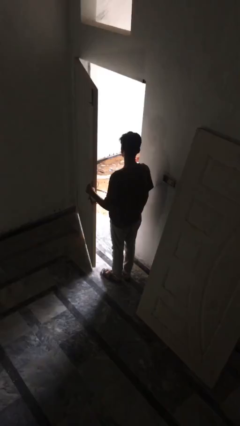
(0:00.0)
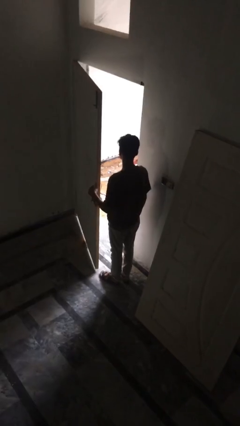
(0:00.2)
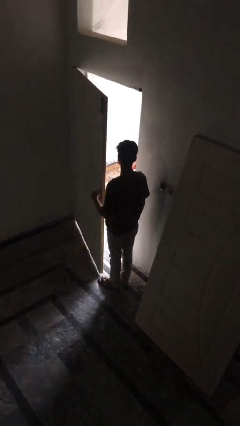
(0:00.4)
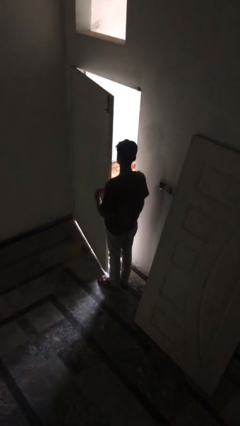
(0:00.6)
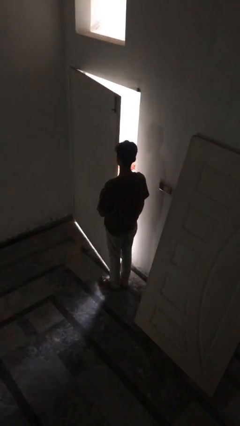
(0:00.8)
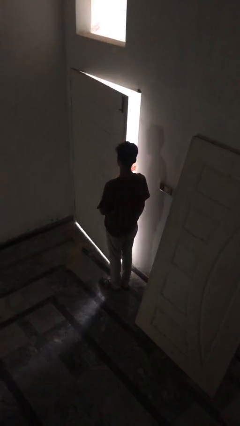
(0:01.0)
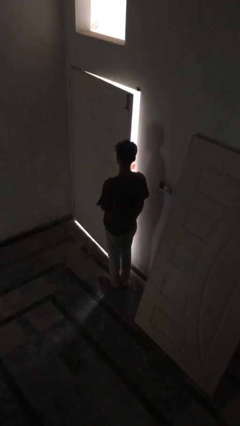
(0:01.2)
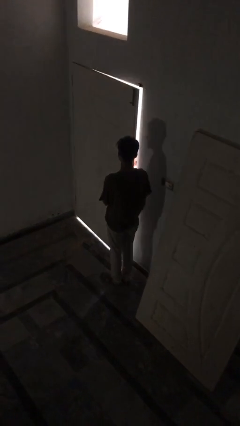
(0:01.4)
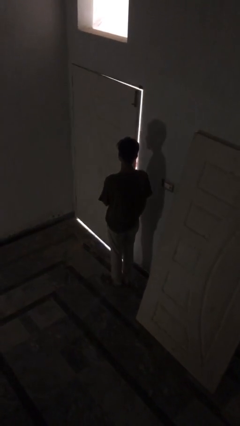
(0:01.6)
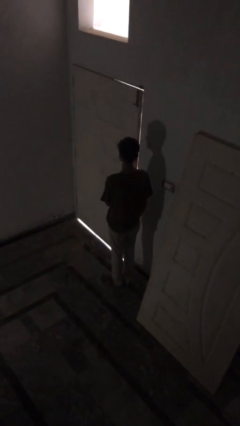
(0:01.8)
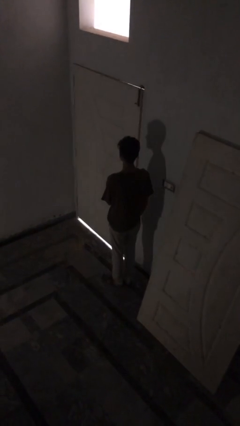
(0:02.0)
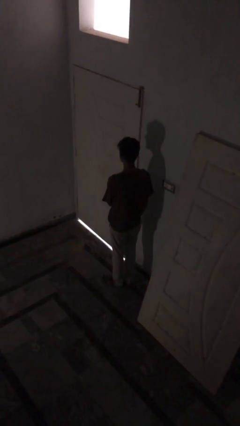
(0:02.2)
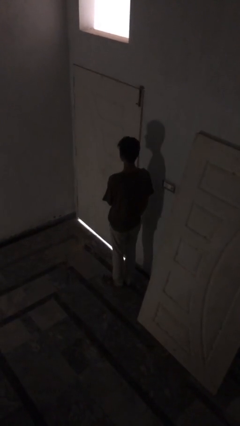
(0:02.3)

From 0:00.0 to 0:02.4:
person closes facility door

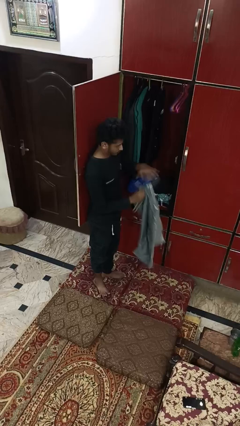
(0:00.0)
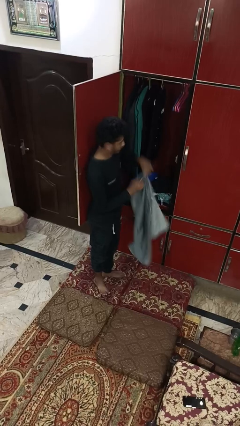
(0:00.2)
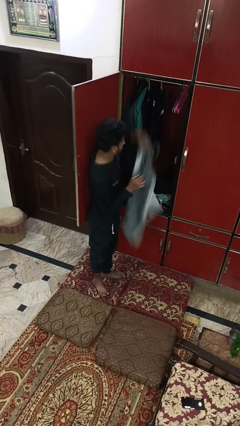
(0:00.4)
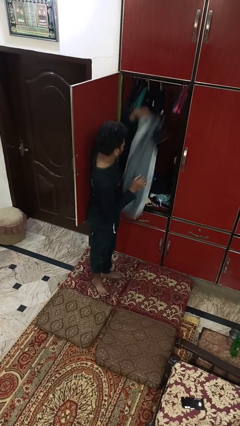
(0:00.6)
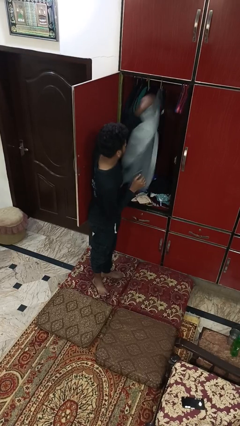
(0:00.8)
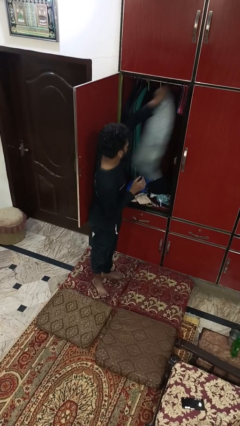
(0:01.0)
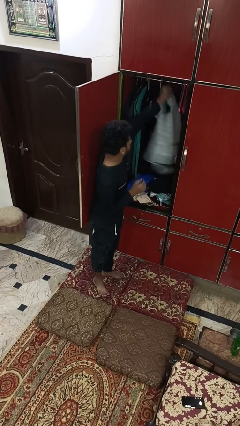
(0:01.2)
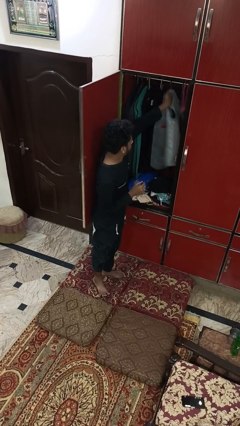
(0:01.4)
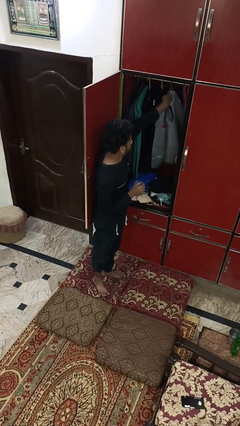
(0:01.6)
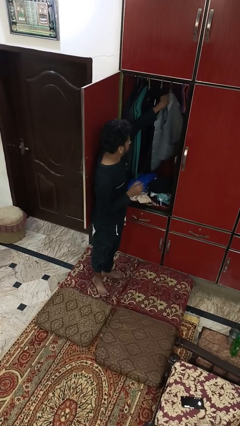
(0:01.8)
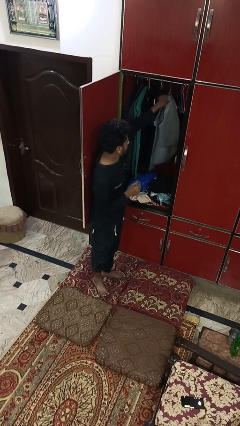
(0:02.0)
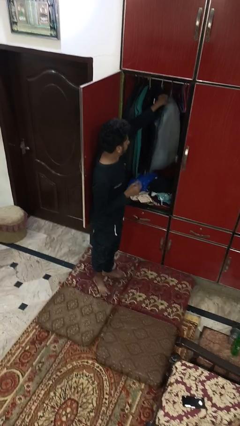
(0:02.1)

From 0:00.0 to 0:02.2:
person puts clothes into closet

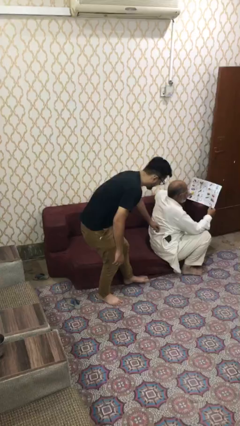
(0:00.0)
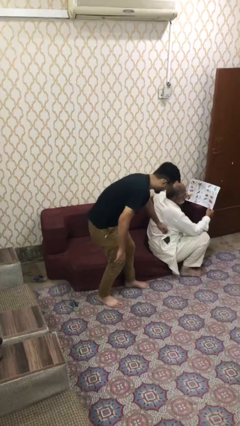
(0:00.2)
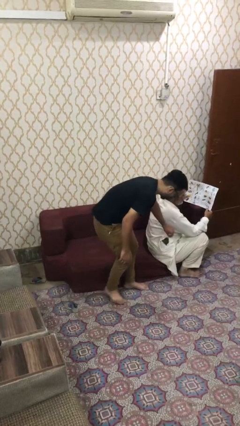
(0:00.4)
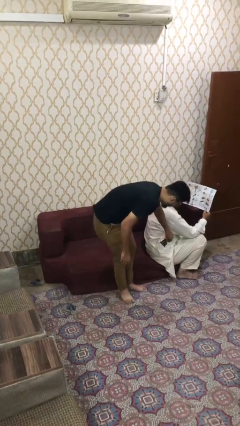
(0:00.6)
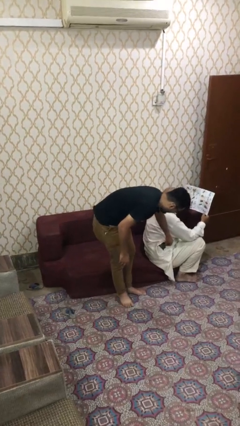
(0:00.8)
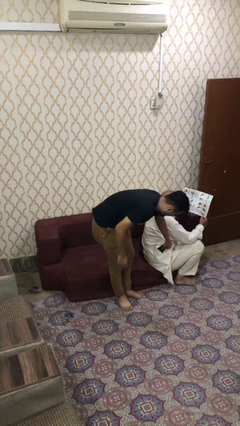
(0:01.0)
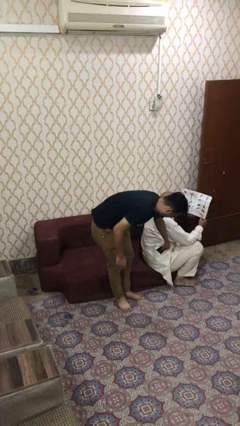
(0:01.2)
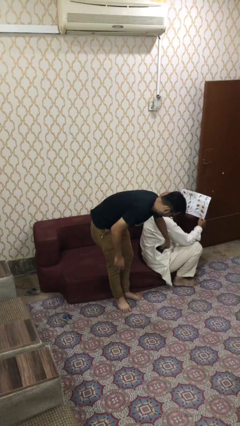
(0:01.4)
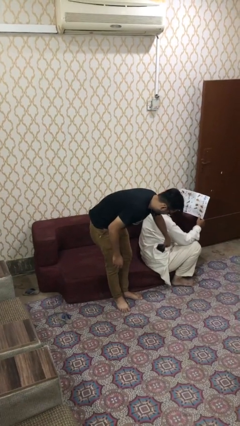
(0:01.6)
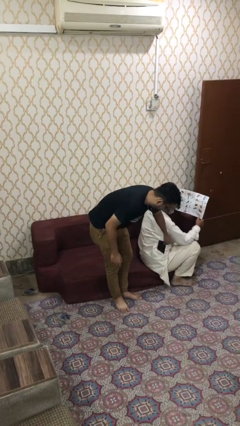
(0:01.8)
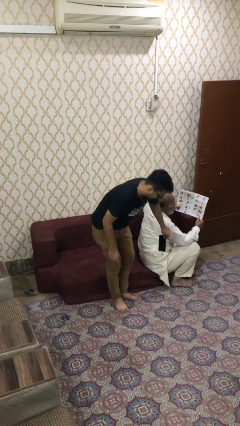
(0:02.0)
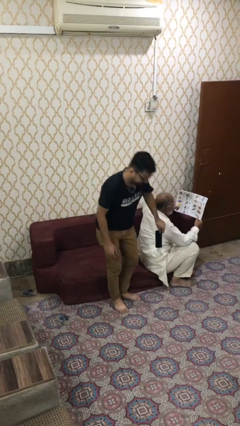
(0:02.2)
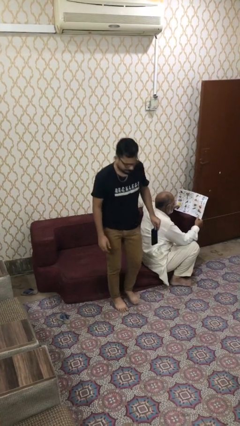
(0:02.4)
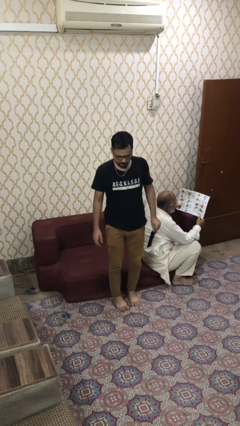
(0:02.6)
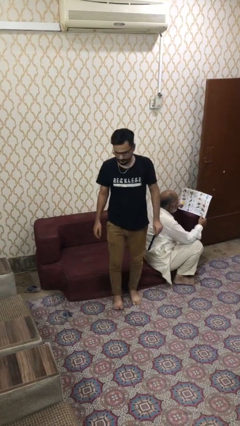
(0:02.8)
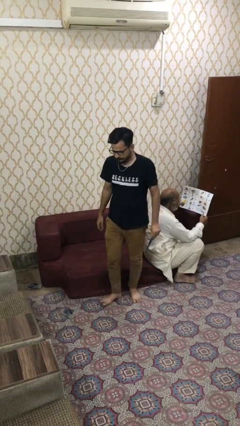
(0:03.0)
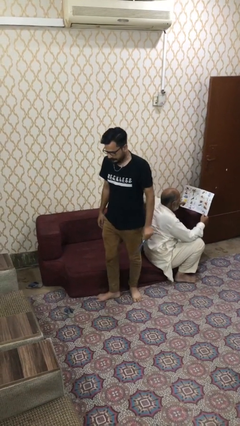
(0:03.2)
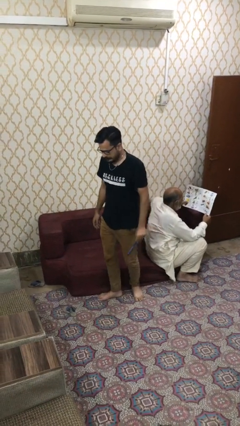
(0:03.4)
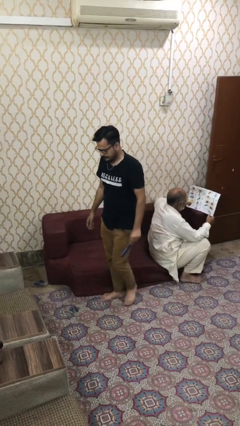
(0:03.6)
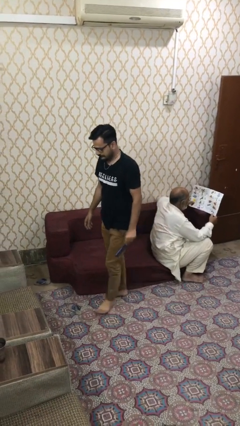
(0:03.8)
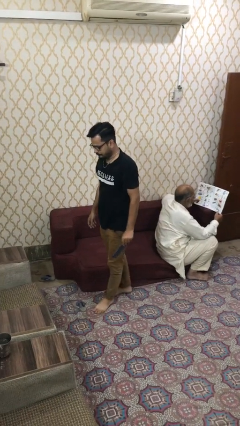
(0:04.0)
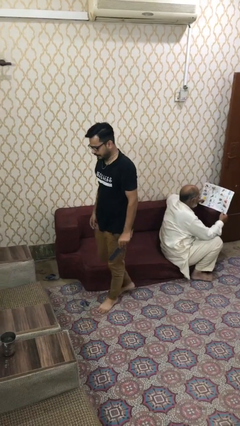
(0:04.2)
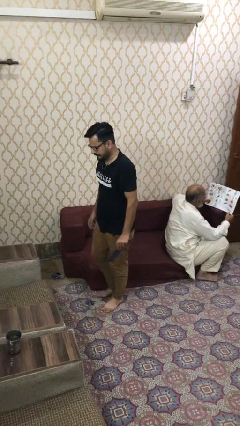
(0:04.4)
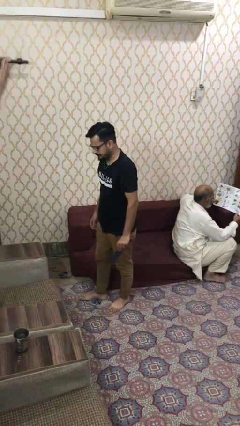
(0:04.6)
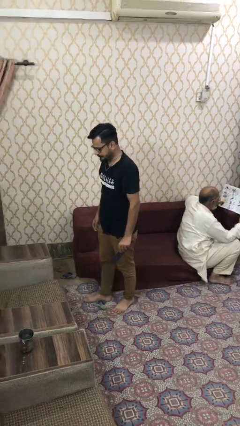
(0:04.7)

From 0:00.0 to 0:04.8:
person steals object from person

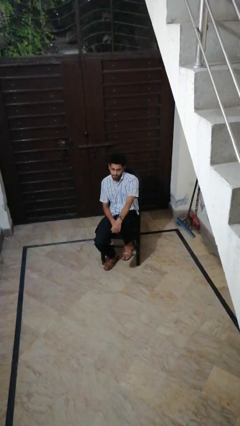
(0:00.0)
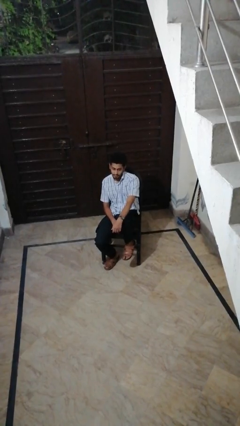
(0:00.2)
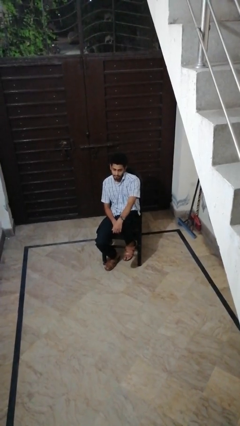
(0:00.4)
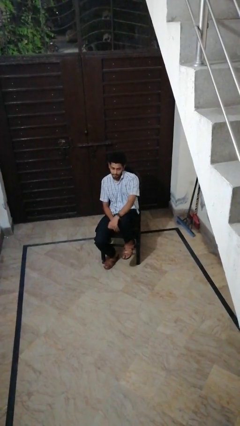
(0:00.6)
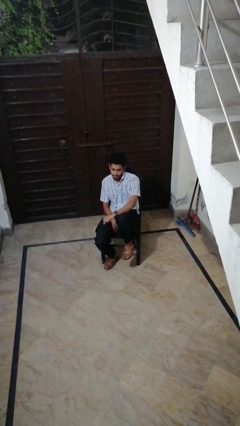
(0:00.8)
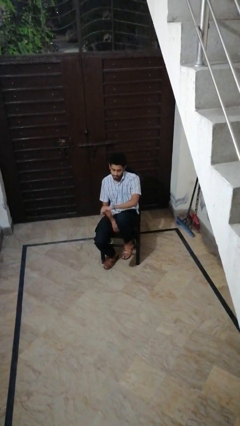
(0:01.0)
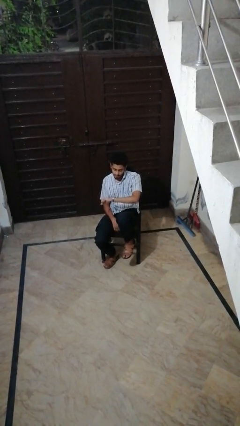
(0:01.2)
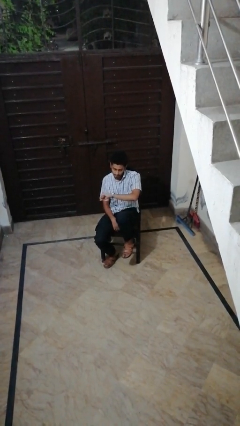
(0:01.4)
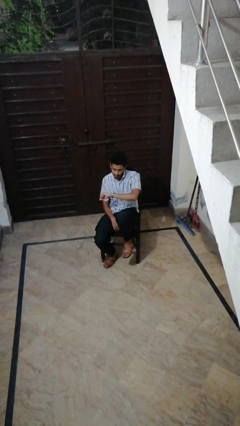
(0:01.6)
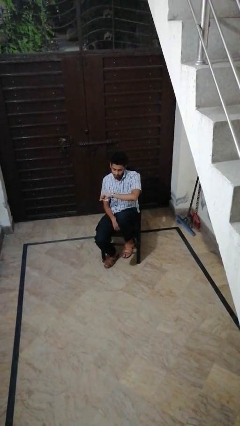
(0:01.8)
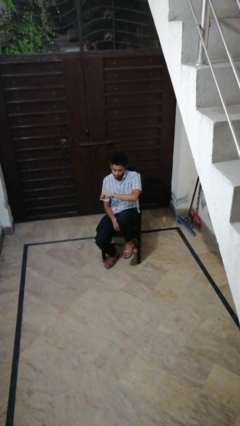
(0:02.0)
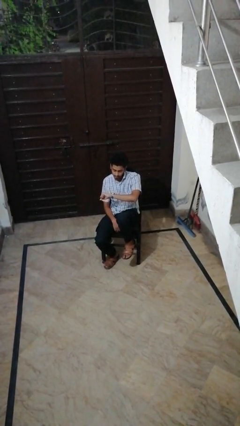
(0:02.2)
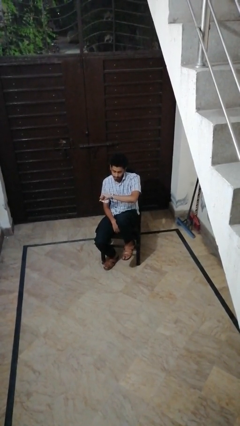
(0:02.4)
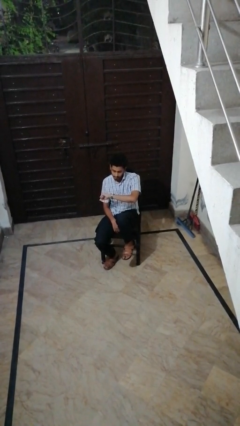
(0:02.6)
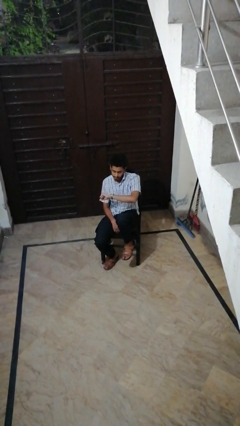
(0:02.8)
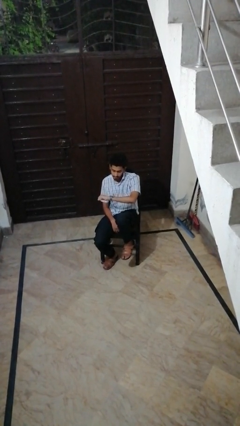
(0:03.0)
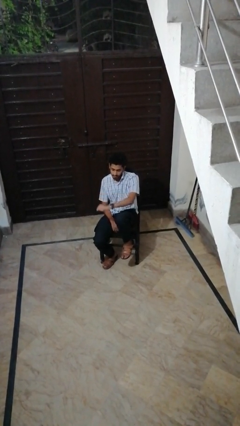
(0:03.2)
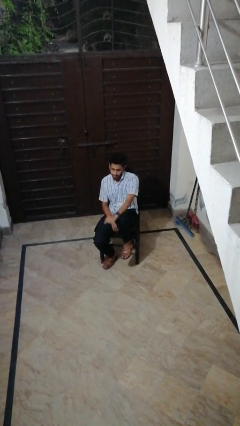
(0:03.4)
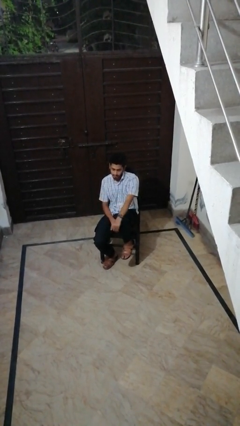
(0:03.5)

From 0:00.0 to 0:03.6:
person looks at wristwatch

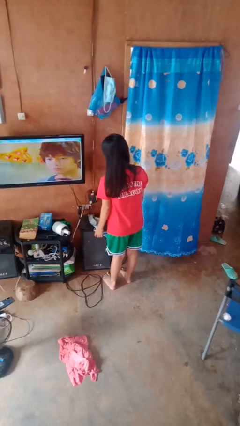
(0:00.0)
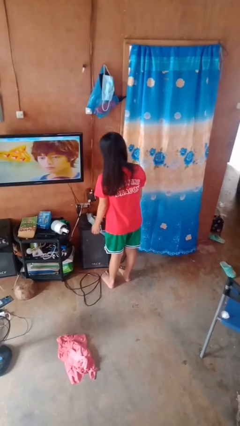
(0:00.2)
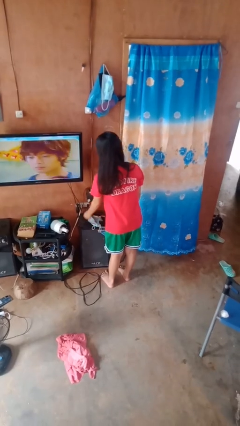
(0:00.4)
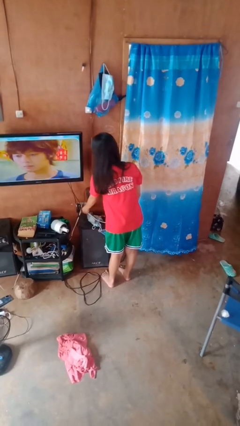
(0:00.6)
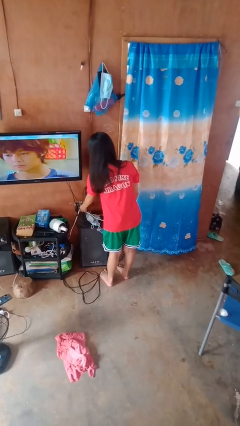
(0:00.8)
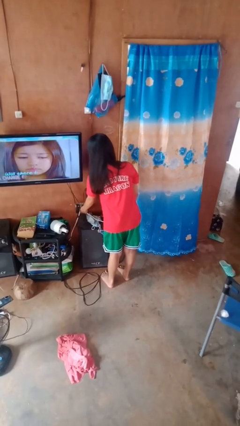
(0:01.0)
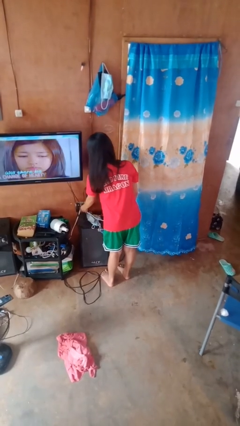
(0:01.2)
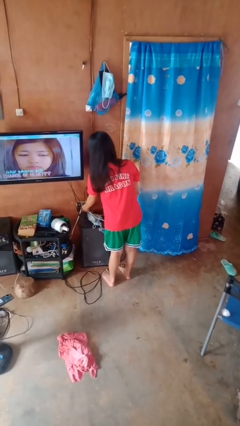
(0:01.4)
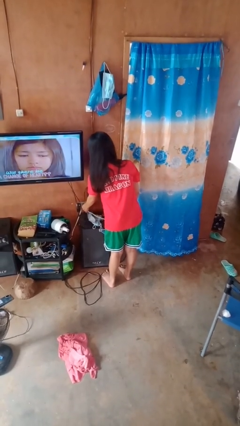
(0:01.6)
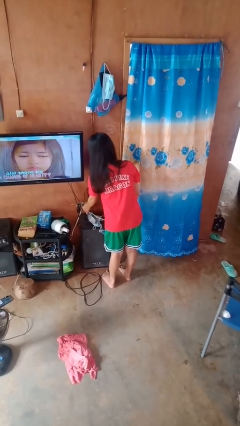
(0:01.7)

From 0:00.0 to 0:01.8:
person plugs into electrical socket

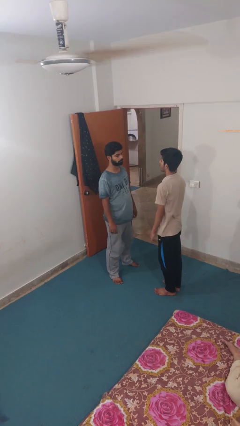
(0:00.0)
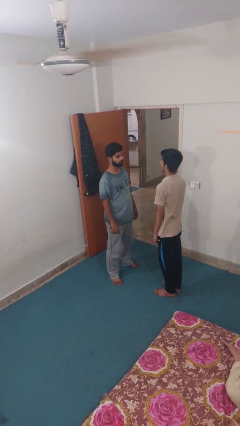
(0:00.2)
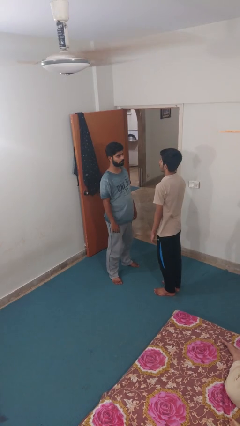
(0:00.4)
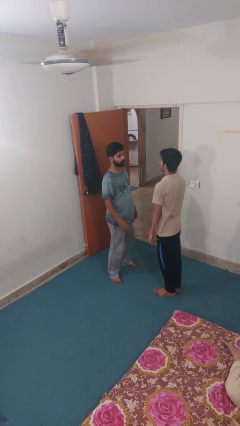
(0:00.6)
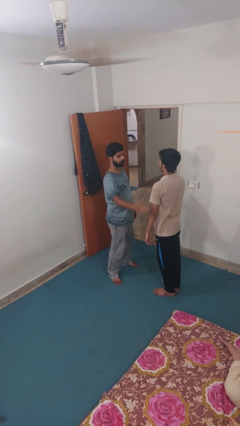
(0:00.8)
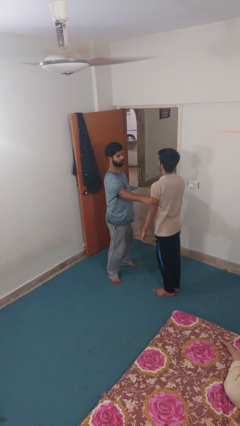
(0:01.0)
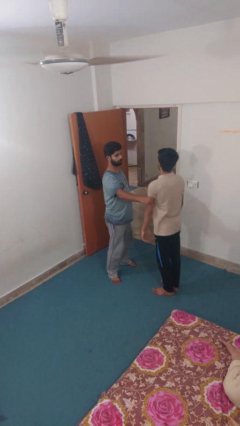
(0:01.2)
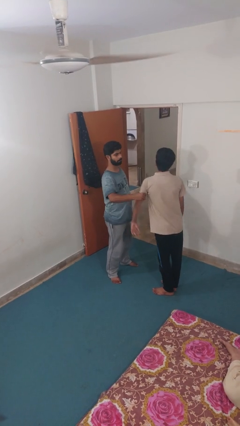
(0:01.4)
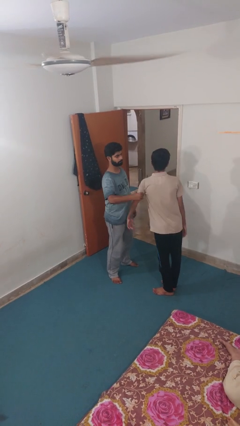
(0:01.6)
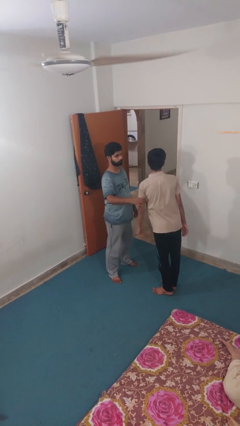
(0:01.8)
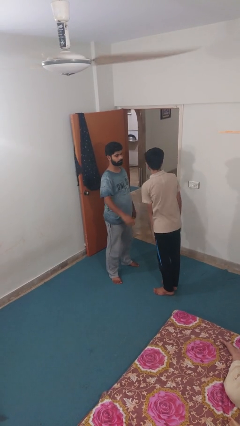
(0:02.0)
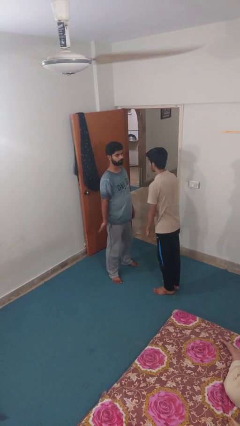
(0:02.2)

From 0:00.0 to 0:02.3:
person grabs person by bicep
